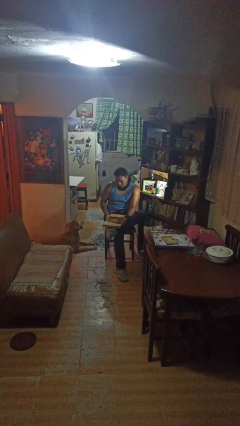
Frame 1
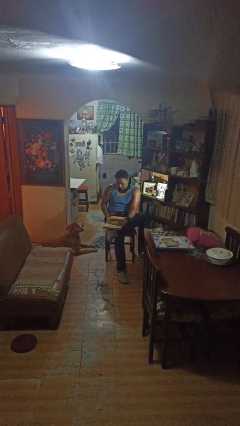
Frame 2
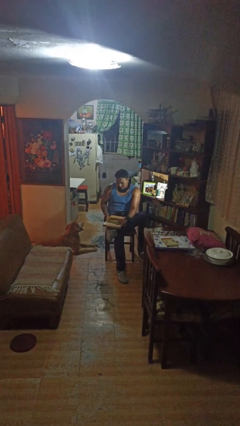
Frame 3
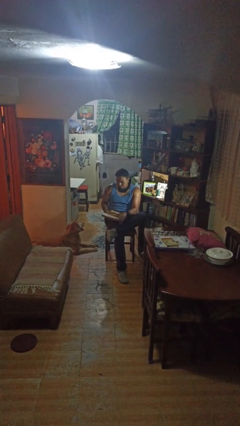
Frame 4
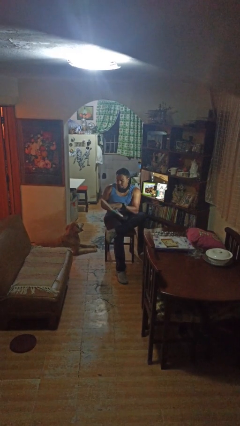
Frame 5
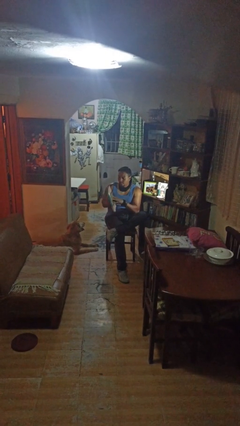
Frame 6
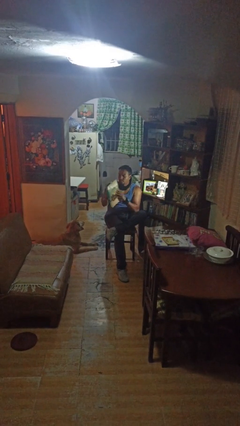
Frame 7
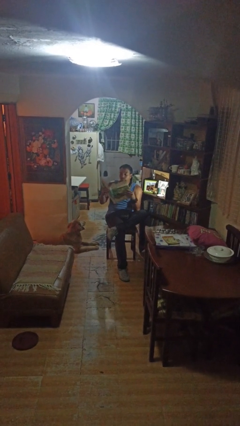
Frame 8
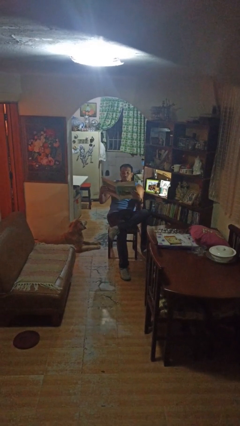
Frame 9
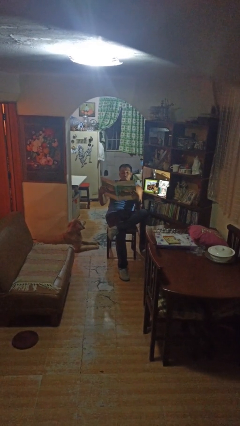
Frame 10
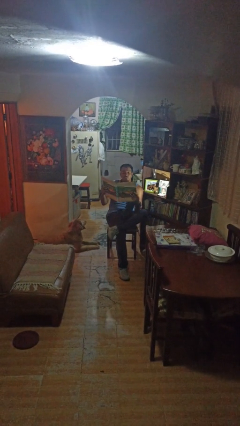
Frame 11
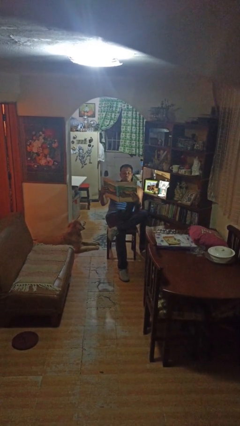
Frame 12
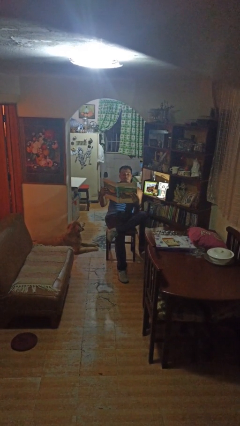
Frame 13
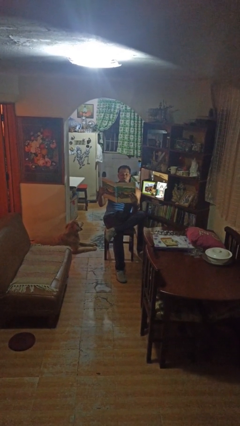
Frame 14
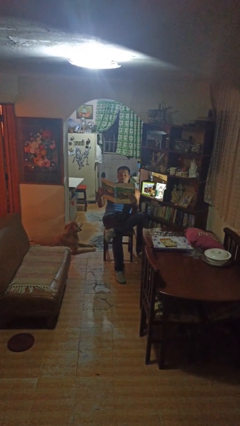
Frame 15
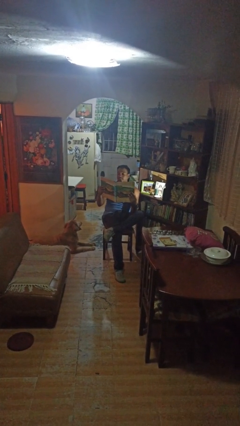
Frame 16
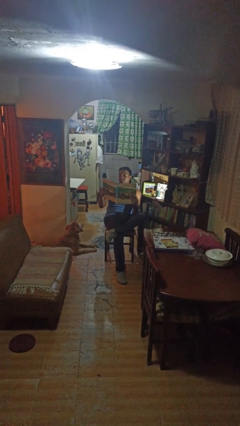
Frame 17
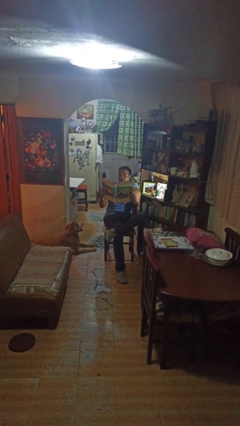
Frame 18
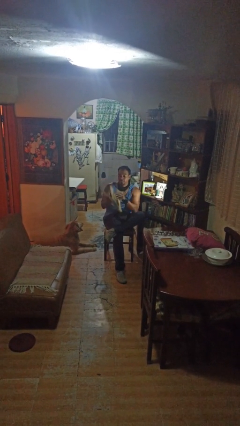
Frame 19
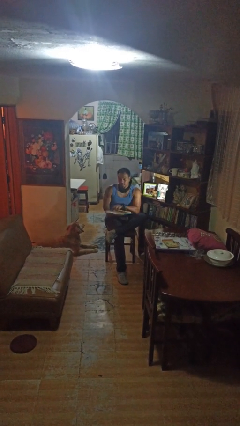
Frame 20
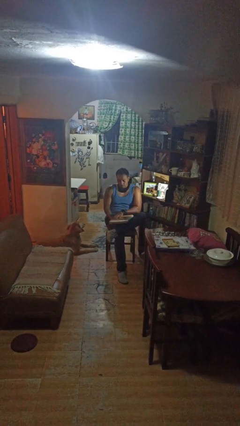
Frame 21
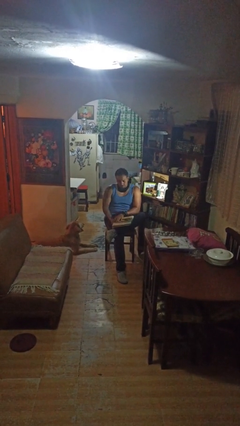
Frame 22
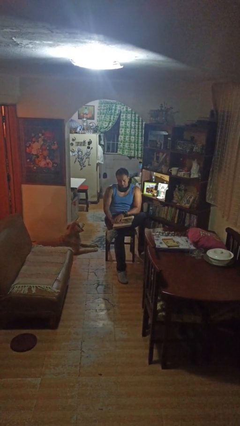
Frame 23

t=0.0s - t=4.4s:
person reads document

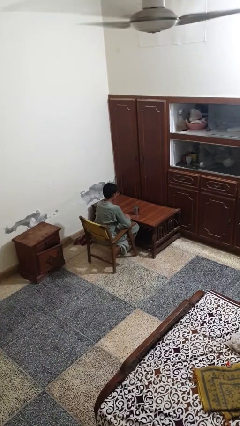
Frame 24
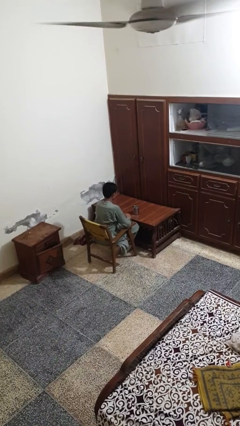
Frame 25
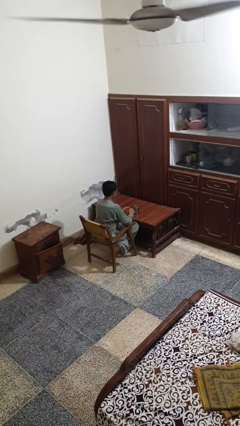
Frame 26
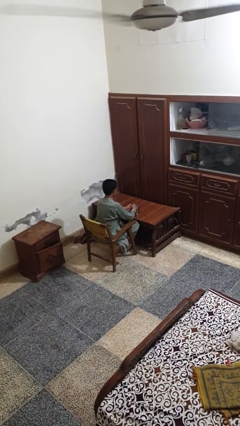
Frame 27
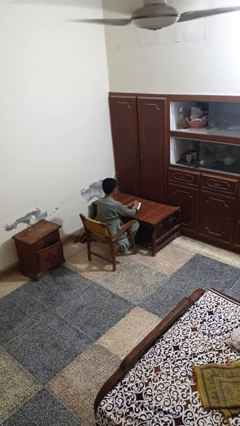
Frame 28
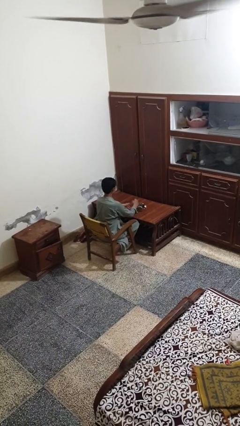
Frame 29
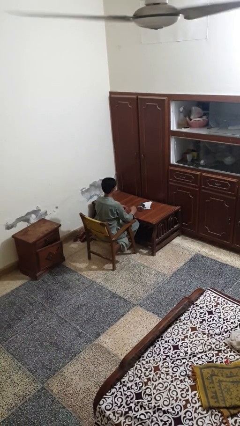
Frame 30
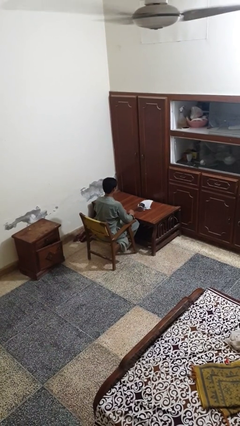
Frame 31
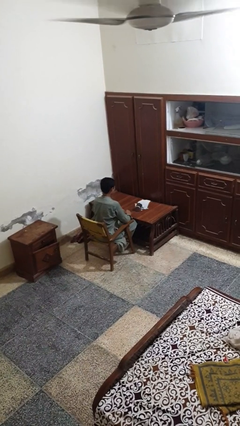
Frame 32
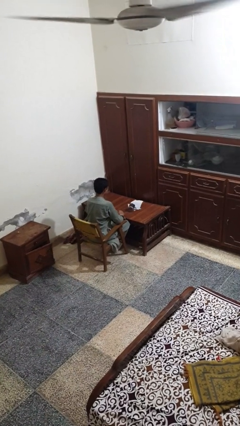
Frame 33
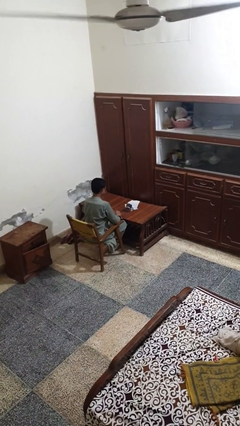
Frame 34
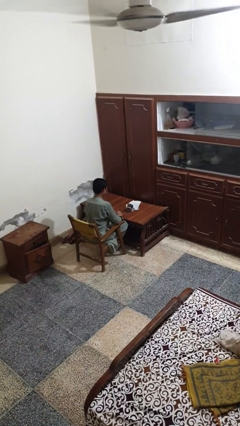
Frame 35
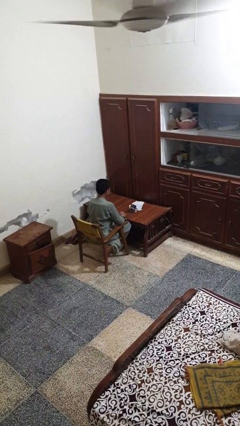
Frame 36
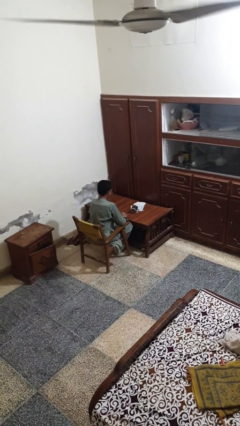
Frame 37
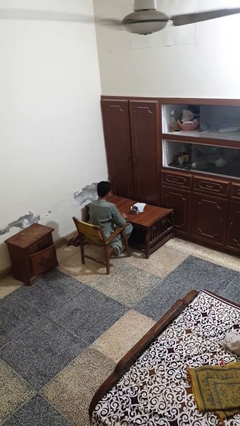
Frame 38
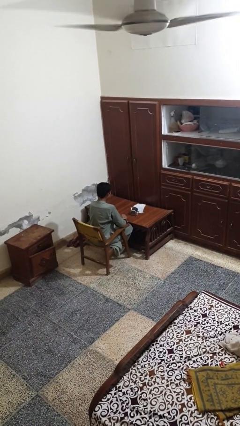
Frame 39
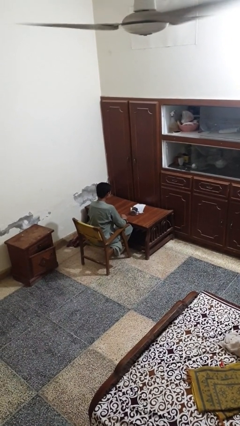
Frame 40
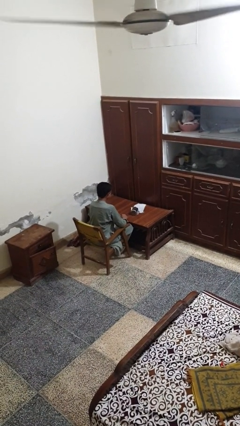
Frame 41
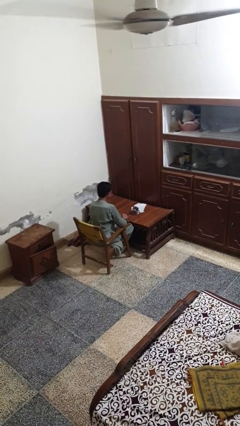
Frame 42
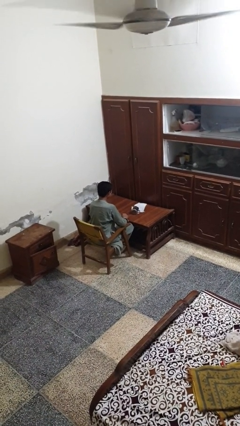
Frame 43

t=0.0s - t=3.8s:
person spills on table

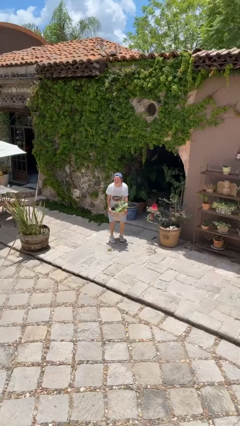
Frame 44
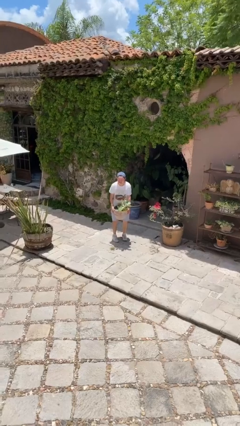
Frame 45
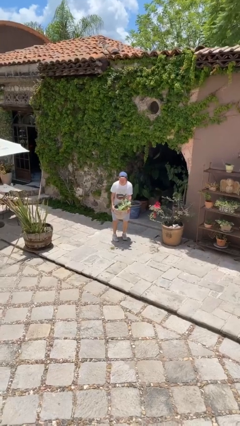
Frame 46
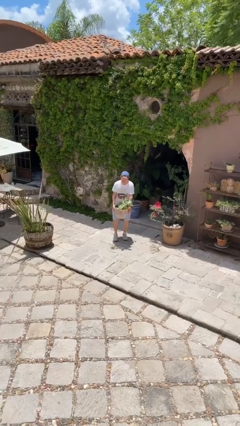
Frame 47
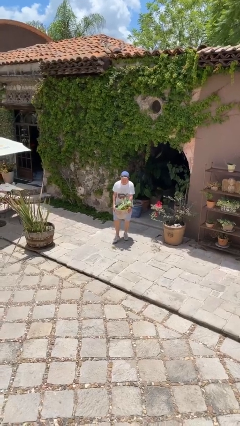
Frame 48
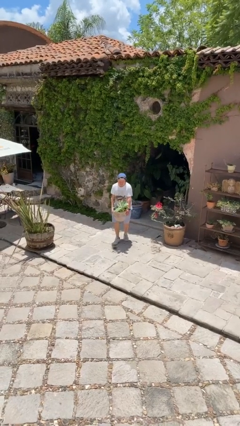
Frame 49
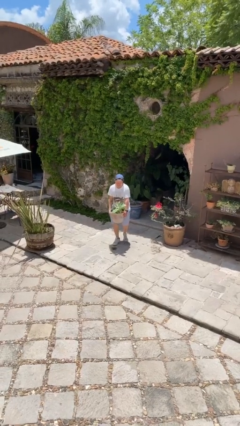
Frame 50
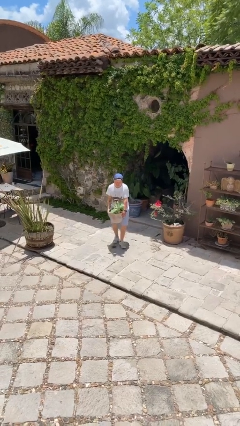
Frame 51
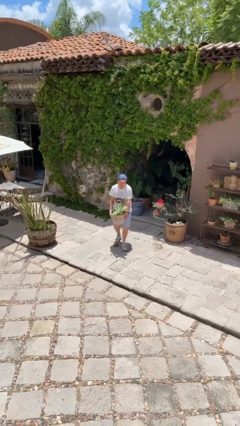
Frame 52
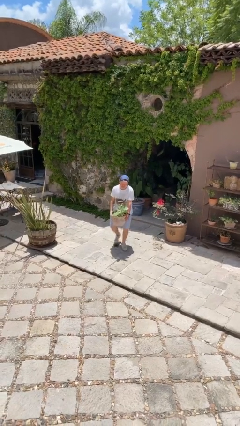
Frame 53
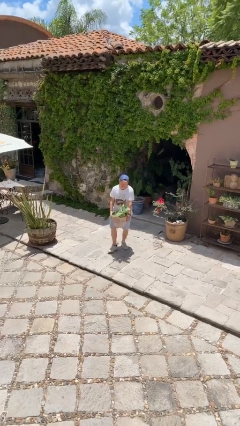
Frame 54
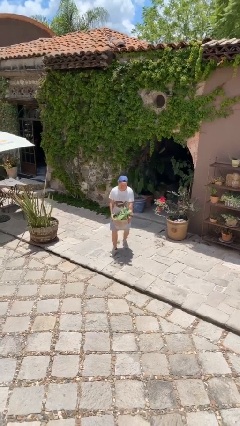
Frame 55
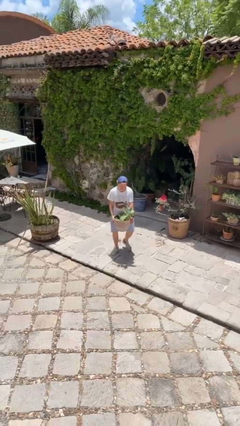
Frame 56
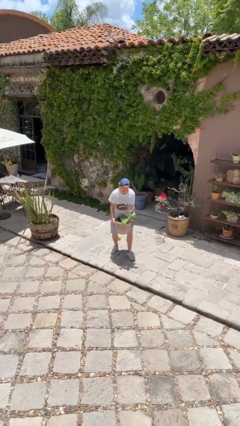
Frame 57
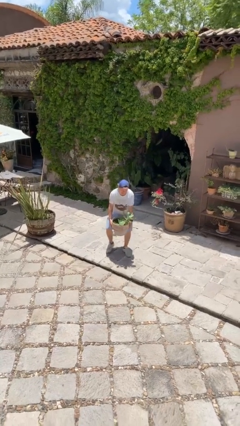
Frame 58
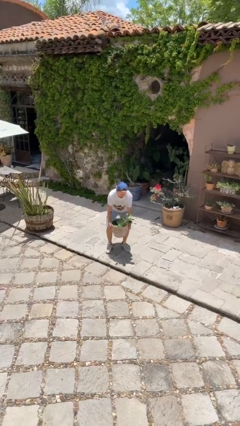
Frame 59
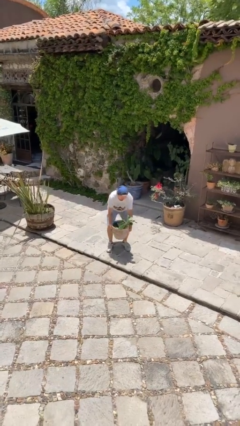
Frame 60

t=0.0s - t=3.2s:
person carries heavy object

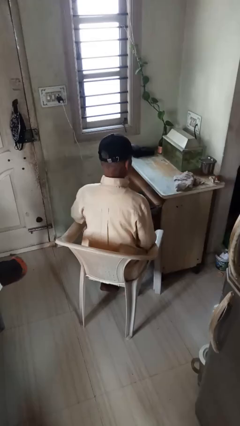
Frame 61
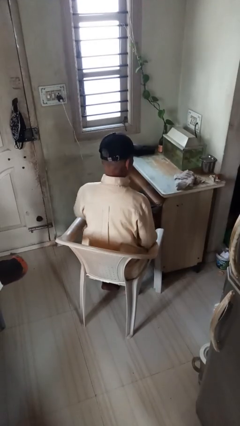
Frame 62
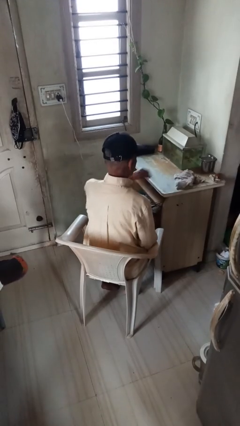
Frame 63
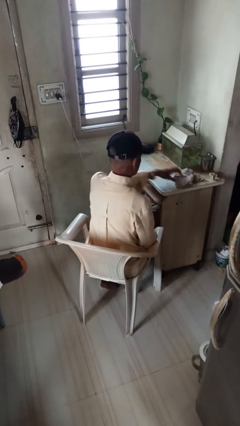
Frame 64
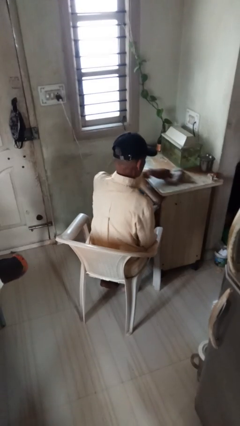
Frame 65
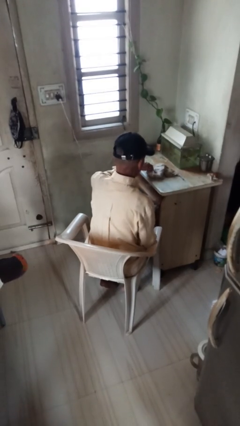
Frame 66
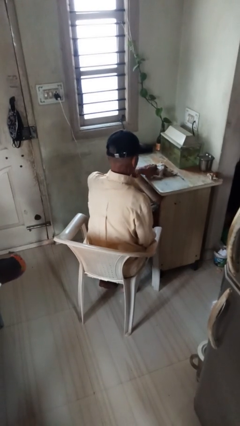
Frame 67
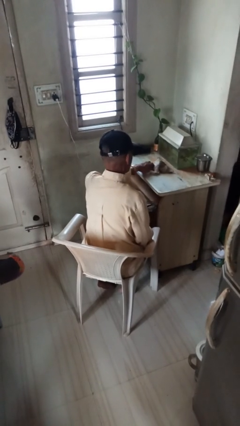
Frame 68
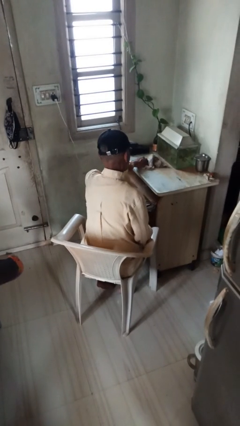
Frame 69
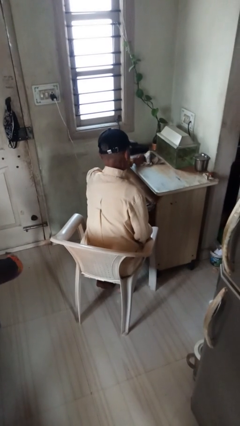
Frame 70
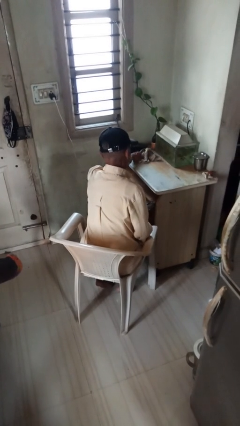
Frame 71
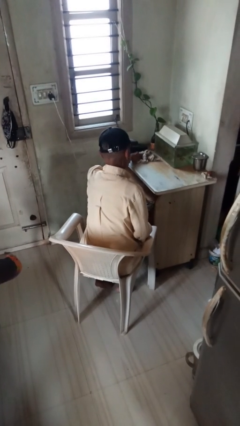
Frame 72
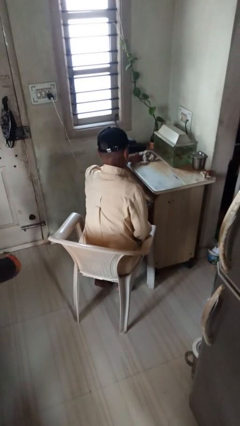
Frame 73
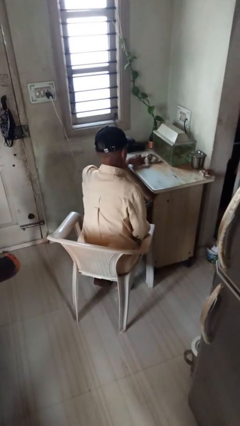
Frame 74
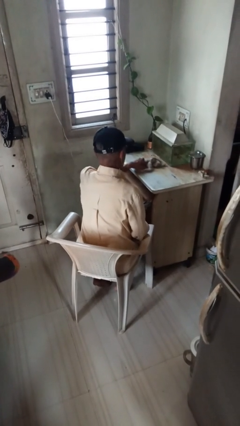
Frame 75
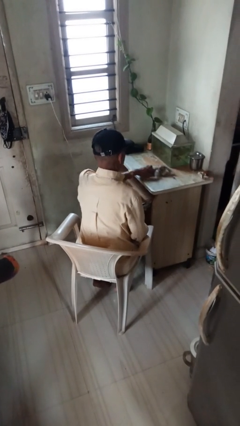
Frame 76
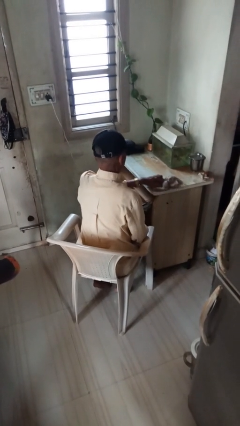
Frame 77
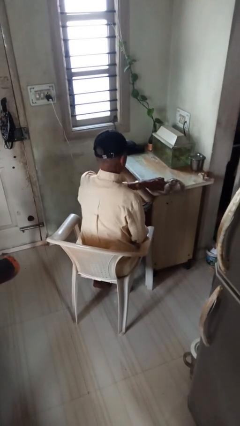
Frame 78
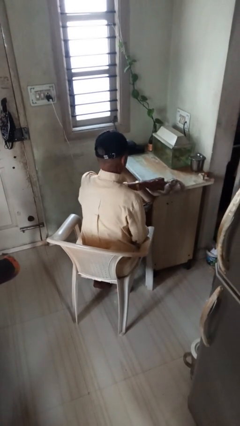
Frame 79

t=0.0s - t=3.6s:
person cleans table with rag

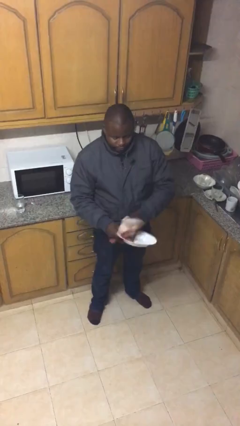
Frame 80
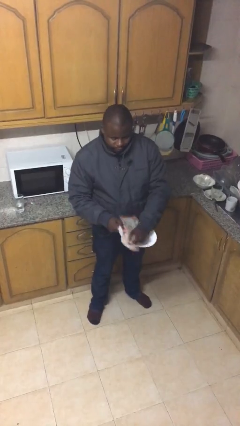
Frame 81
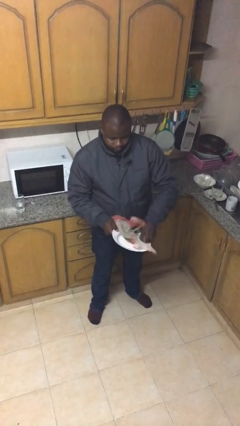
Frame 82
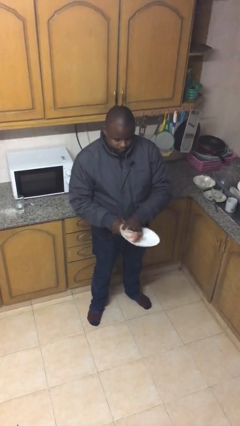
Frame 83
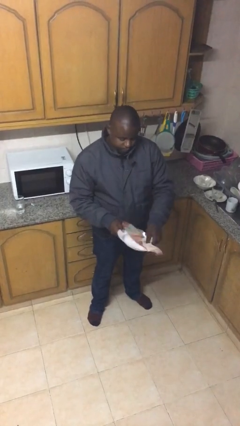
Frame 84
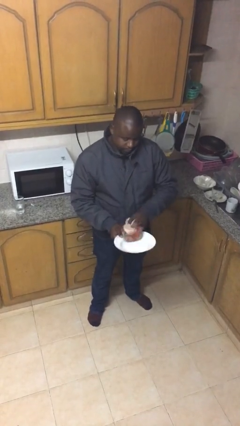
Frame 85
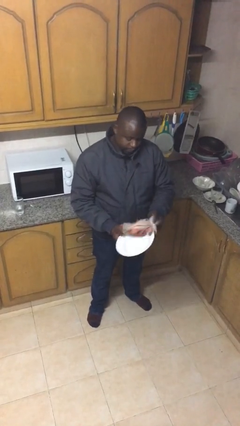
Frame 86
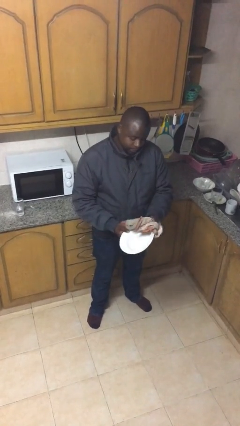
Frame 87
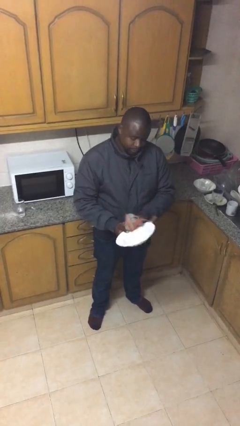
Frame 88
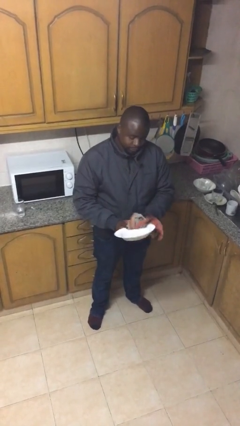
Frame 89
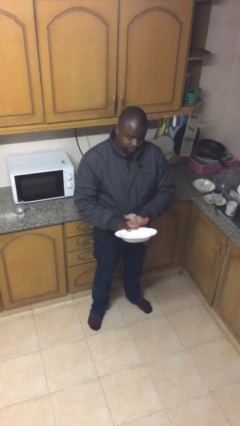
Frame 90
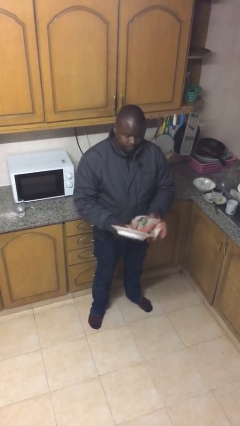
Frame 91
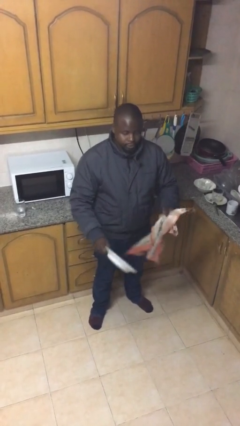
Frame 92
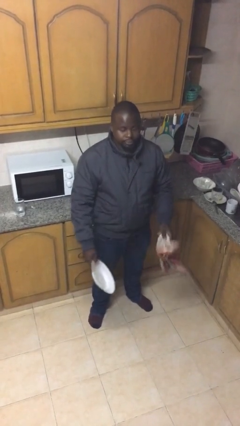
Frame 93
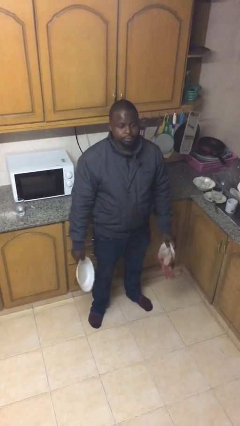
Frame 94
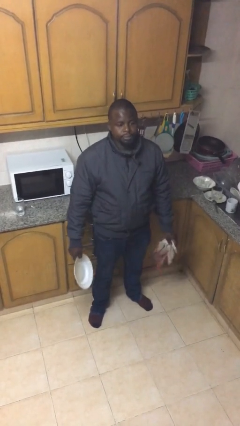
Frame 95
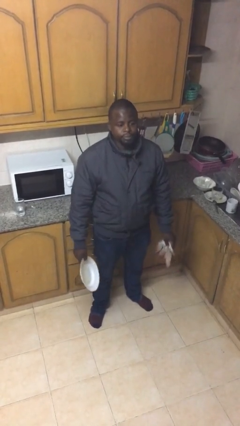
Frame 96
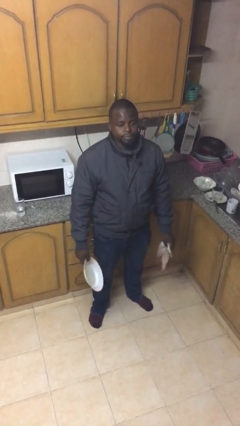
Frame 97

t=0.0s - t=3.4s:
person dries dish
